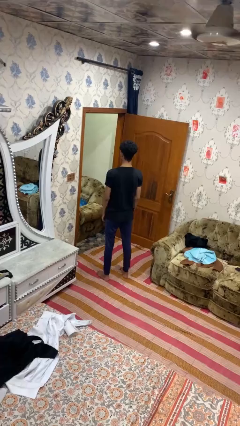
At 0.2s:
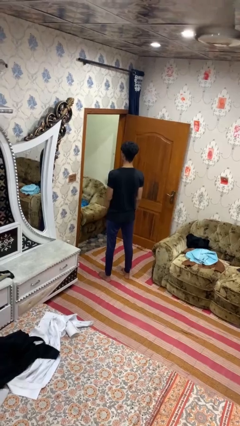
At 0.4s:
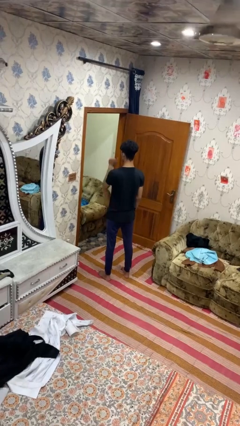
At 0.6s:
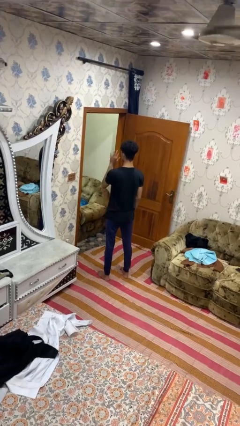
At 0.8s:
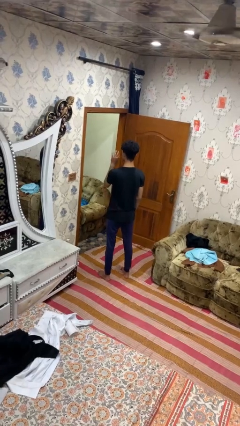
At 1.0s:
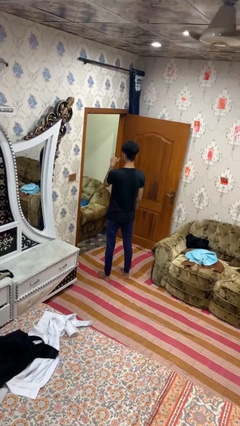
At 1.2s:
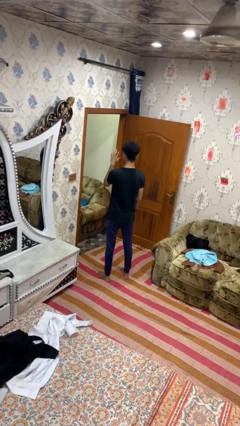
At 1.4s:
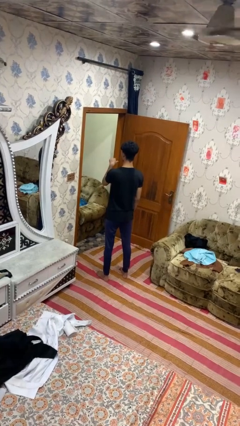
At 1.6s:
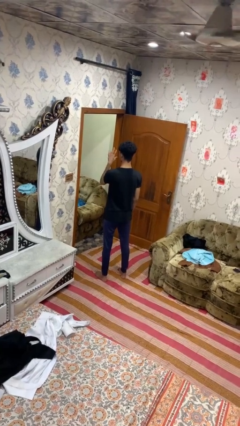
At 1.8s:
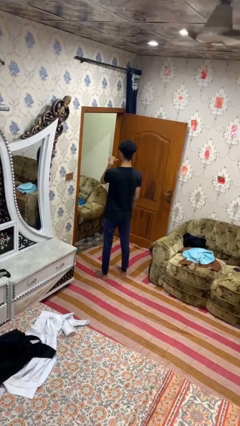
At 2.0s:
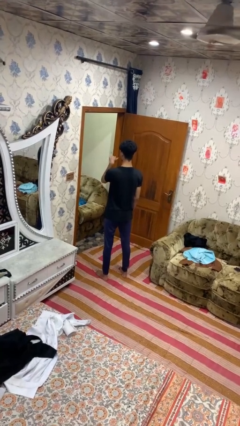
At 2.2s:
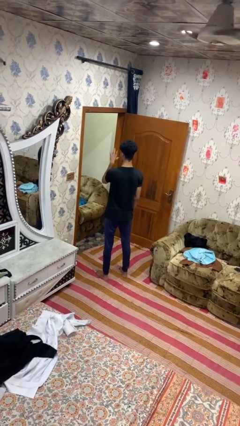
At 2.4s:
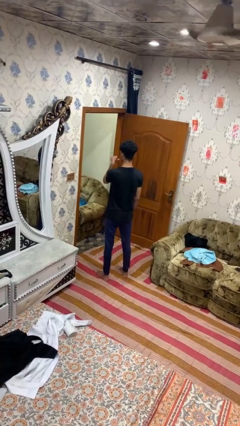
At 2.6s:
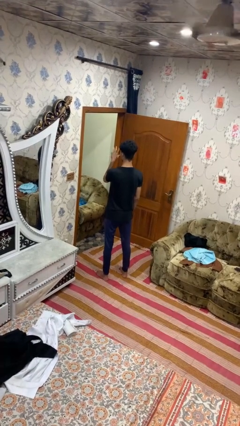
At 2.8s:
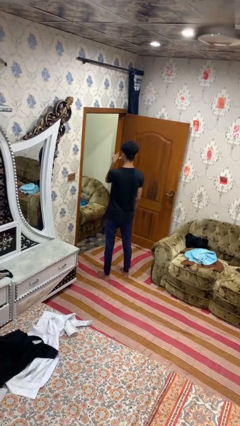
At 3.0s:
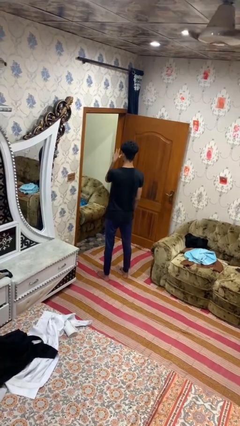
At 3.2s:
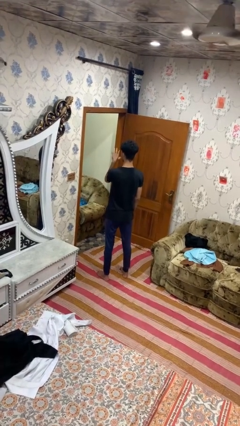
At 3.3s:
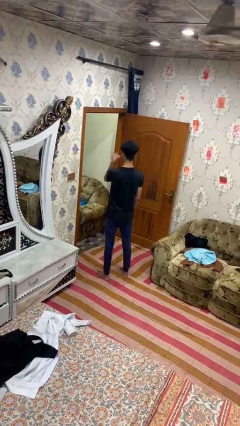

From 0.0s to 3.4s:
person gestures listen closely

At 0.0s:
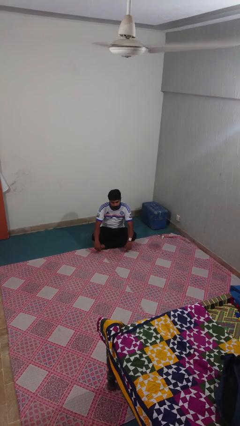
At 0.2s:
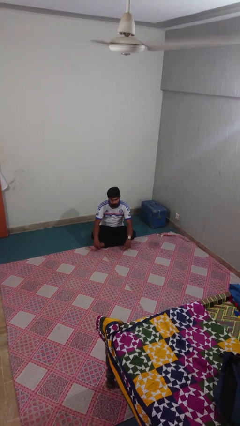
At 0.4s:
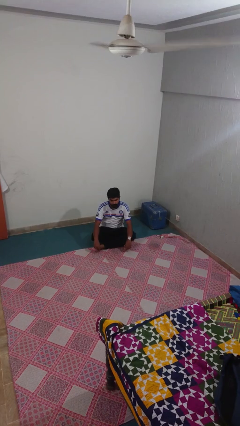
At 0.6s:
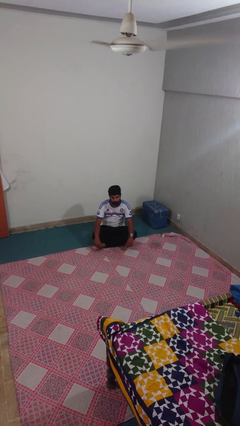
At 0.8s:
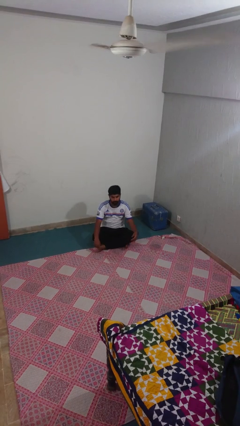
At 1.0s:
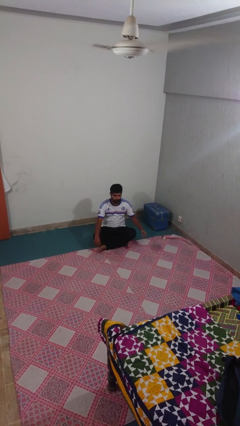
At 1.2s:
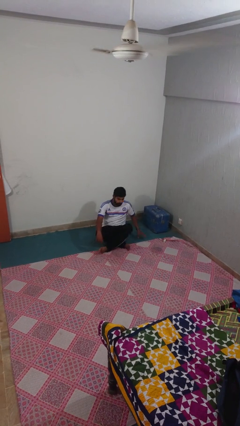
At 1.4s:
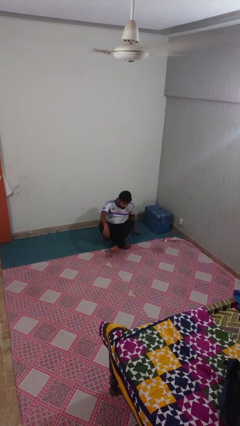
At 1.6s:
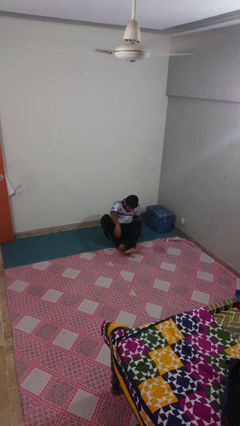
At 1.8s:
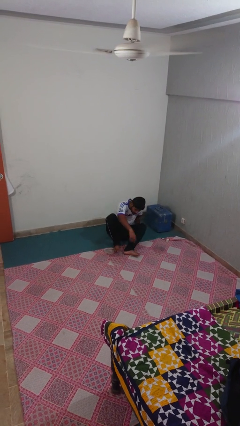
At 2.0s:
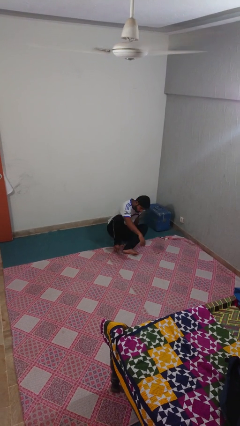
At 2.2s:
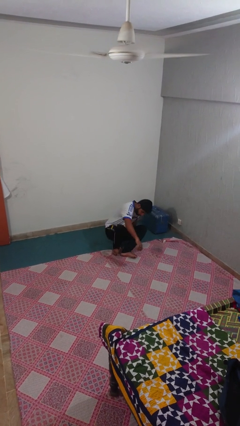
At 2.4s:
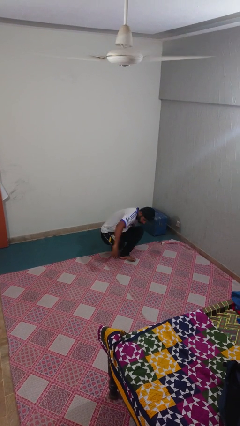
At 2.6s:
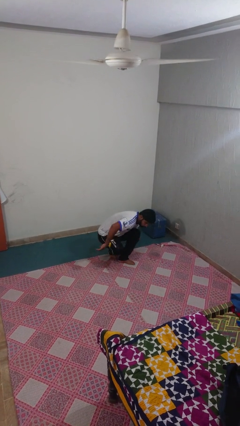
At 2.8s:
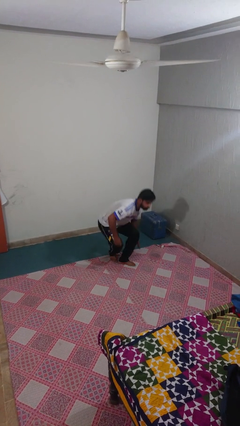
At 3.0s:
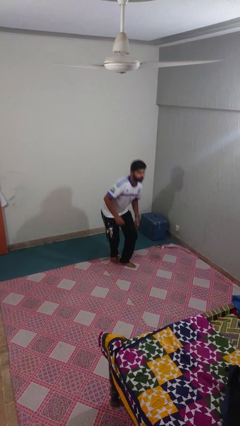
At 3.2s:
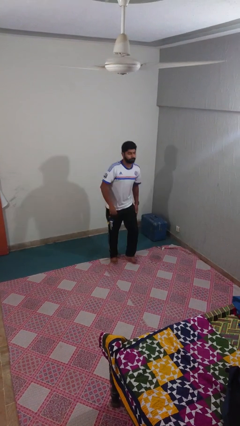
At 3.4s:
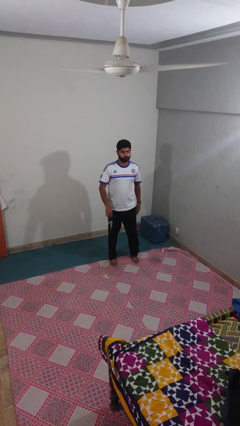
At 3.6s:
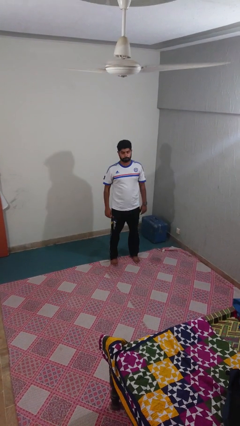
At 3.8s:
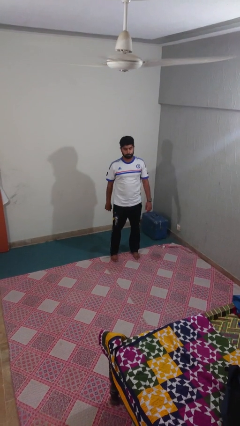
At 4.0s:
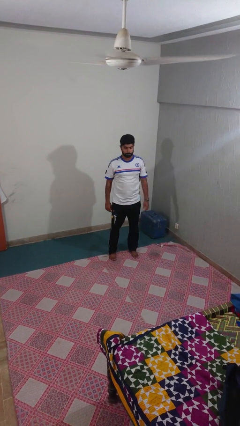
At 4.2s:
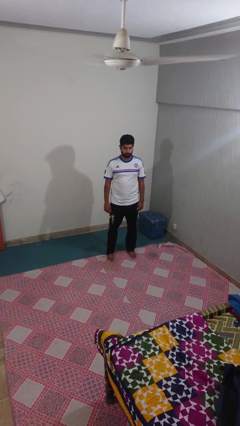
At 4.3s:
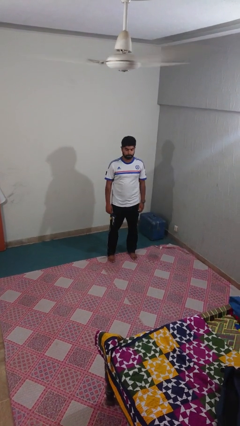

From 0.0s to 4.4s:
person stands up from floor

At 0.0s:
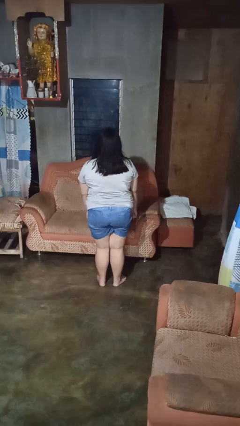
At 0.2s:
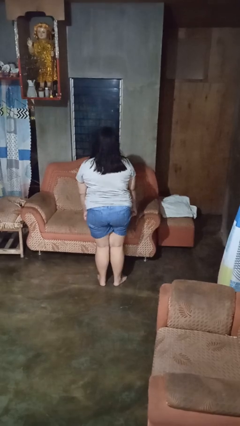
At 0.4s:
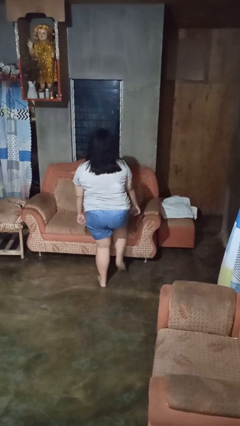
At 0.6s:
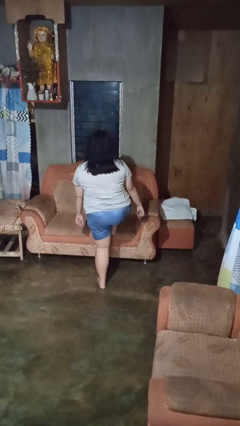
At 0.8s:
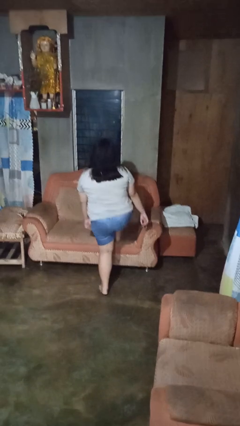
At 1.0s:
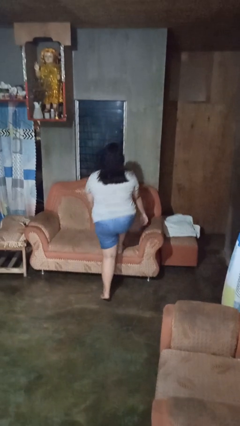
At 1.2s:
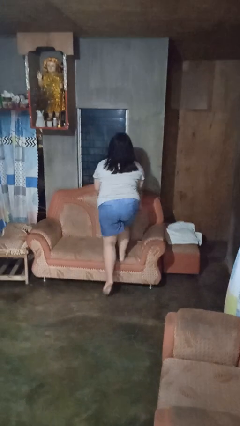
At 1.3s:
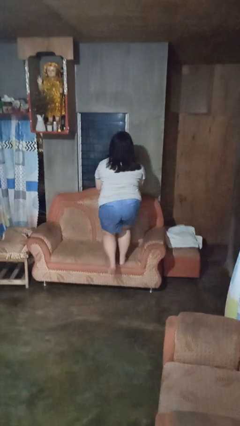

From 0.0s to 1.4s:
person climbs on couch

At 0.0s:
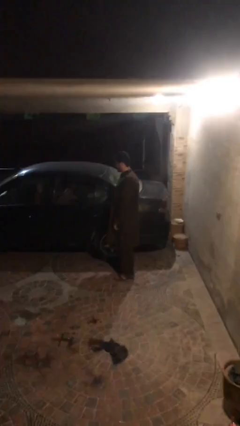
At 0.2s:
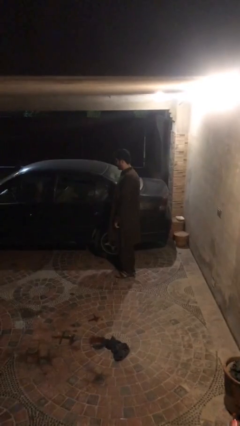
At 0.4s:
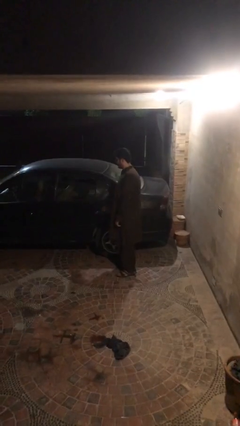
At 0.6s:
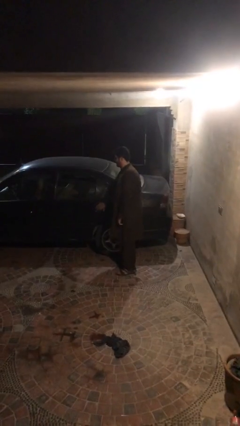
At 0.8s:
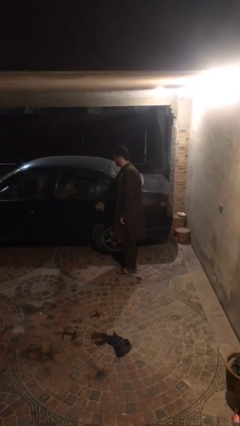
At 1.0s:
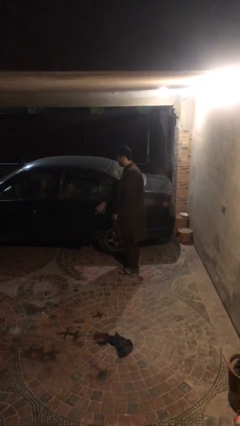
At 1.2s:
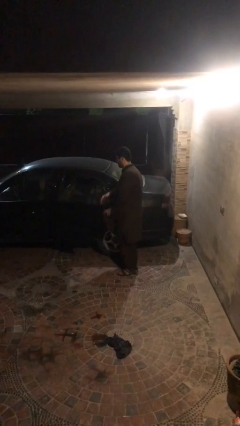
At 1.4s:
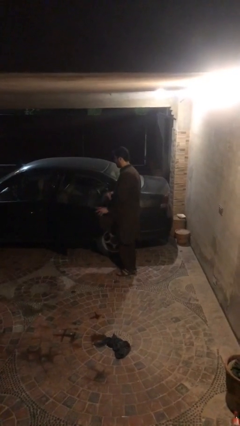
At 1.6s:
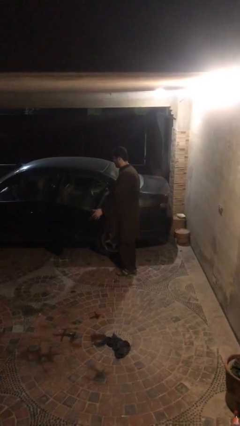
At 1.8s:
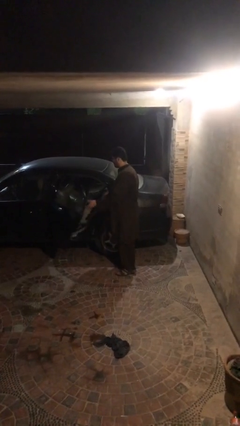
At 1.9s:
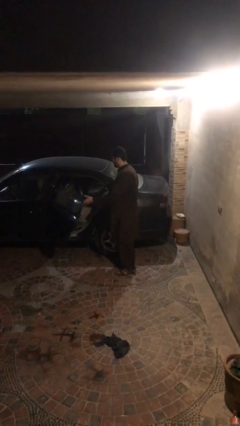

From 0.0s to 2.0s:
person opens car door

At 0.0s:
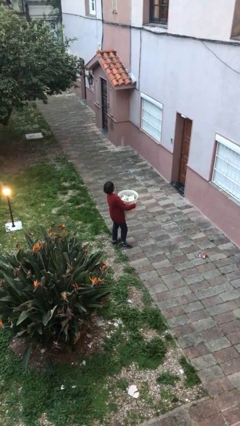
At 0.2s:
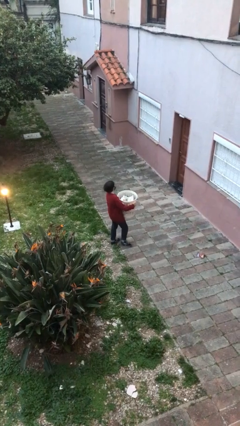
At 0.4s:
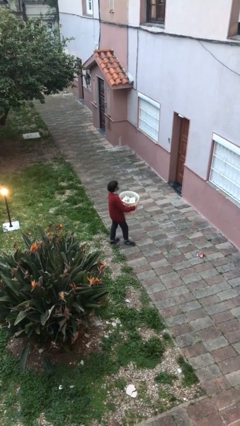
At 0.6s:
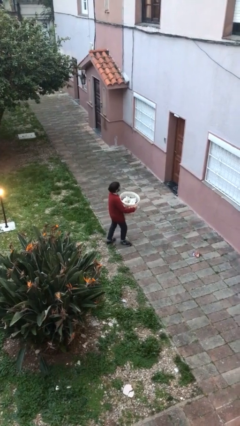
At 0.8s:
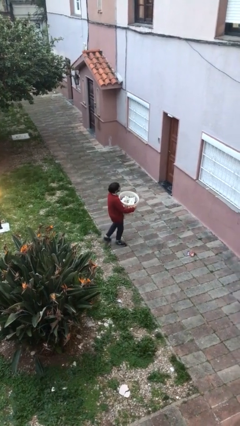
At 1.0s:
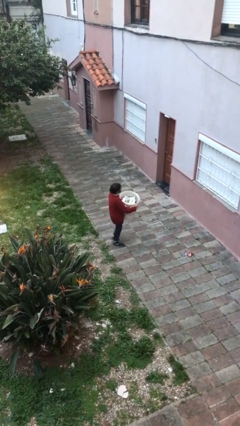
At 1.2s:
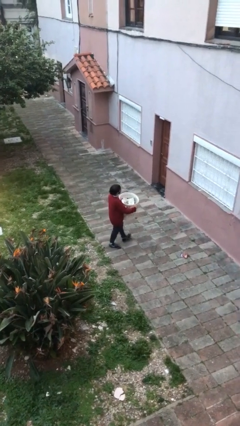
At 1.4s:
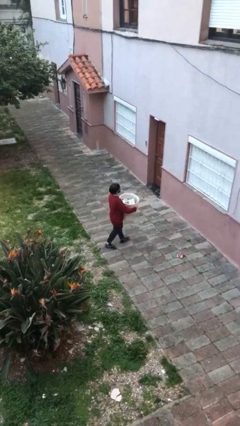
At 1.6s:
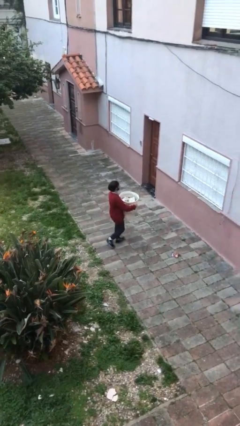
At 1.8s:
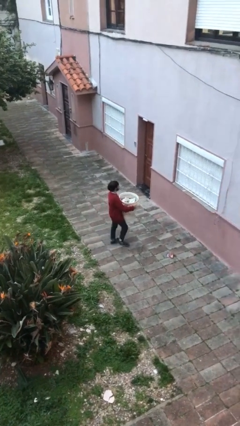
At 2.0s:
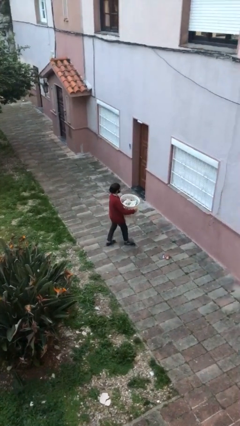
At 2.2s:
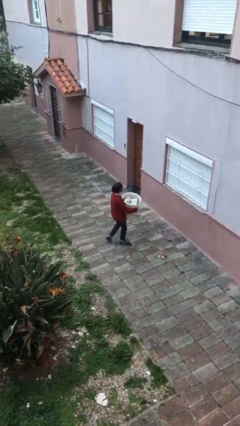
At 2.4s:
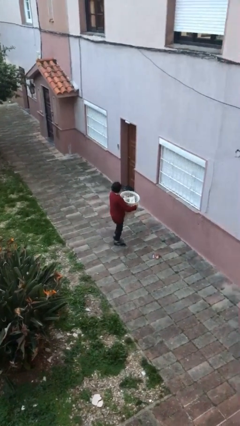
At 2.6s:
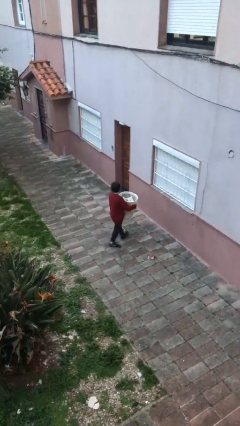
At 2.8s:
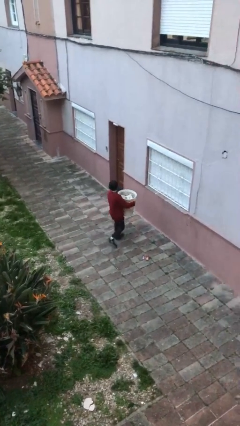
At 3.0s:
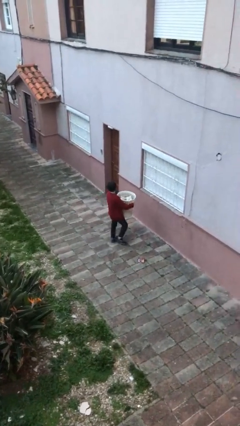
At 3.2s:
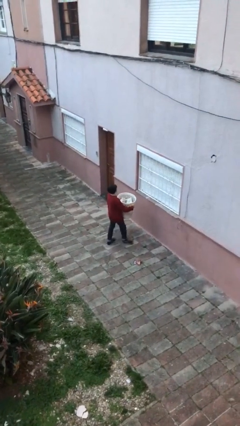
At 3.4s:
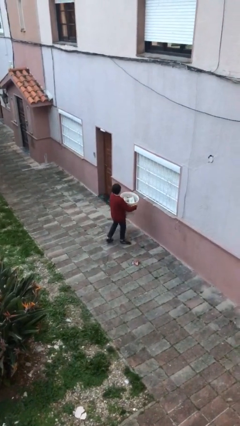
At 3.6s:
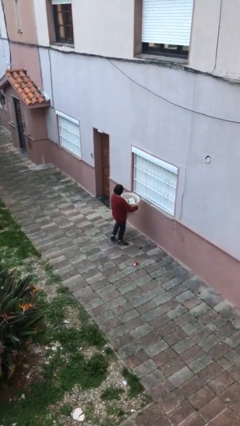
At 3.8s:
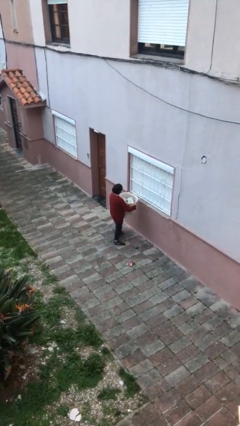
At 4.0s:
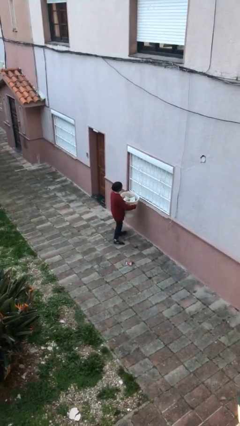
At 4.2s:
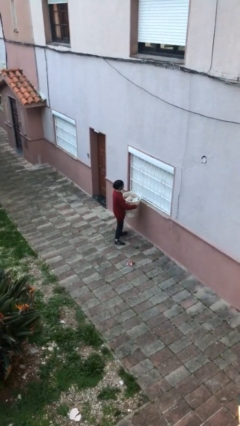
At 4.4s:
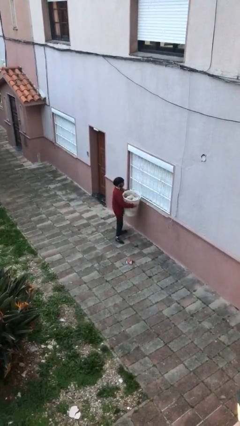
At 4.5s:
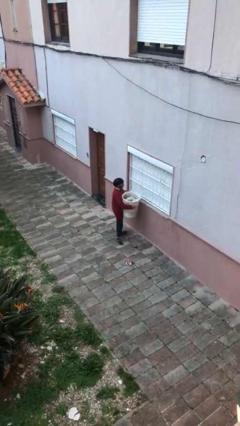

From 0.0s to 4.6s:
person carries laundry basket

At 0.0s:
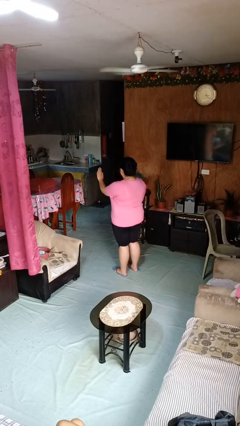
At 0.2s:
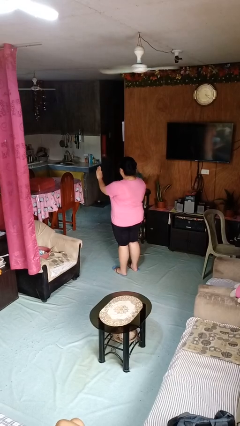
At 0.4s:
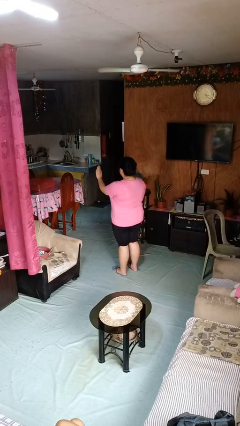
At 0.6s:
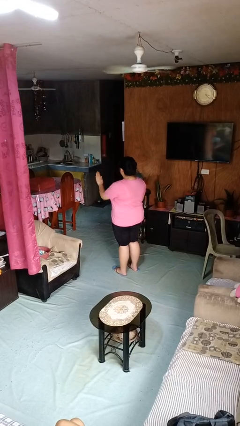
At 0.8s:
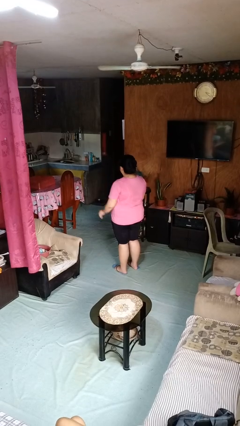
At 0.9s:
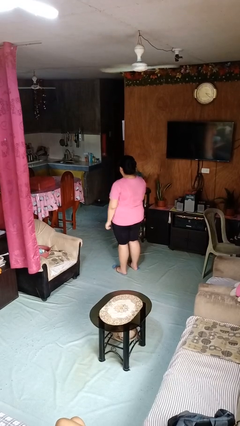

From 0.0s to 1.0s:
person gestures stop

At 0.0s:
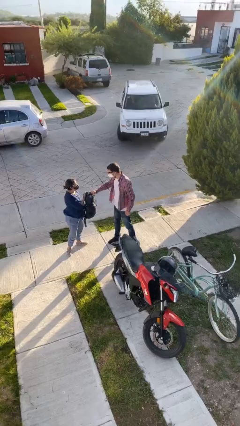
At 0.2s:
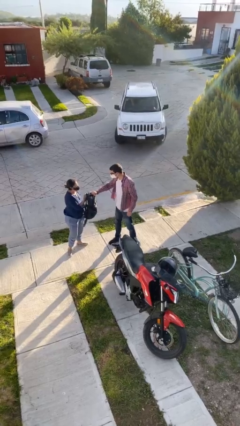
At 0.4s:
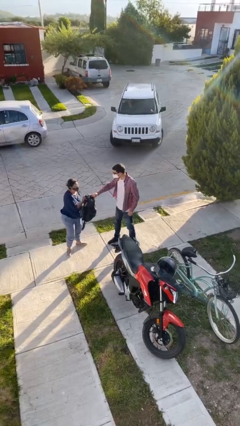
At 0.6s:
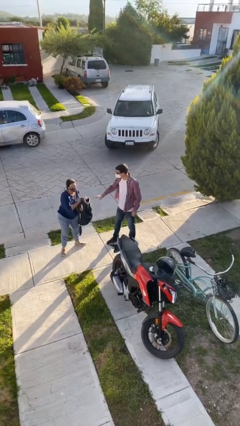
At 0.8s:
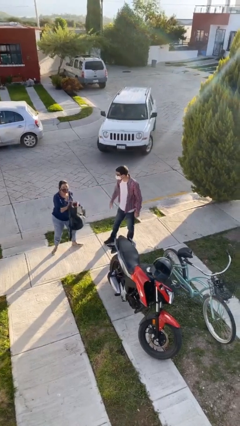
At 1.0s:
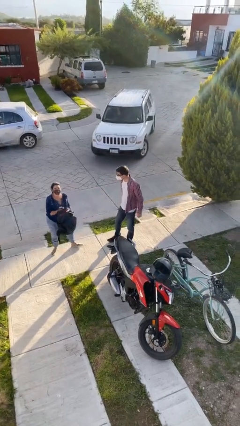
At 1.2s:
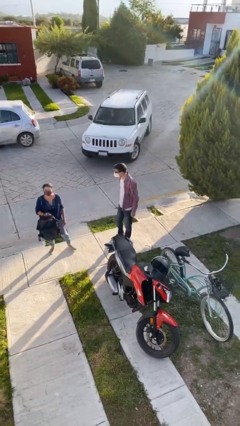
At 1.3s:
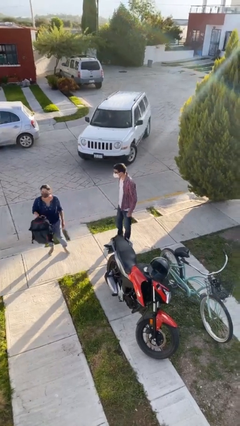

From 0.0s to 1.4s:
person transfers object to person
